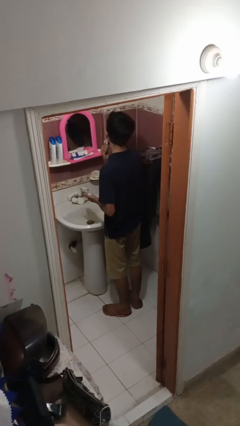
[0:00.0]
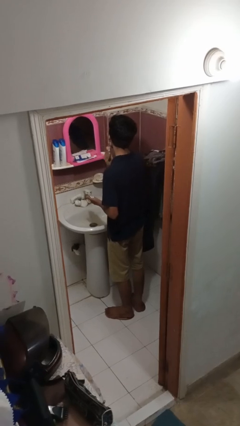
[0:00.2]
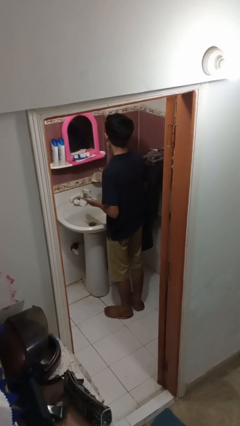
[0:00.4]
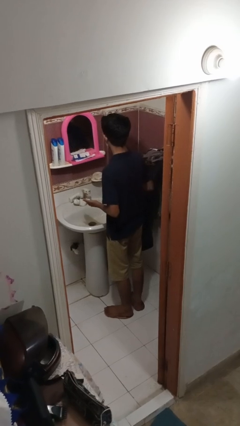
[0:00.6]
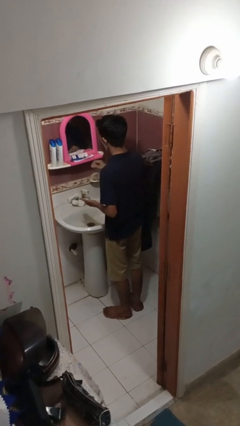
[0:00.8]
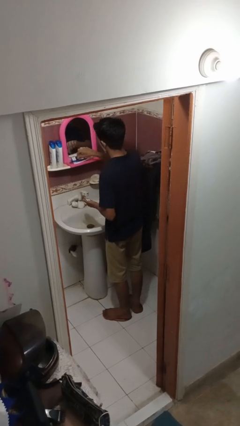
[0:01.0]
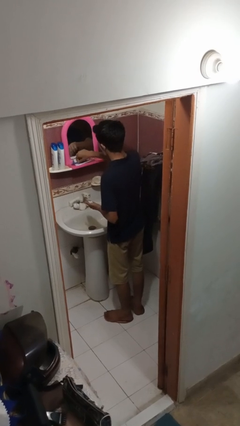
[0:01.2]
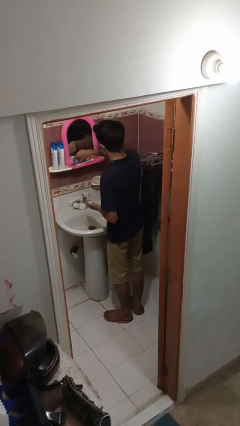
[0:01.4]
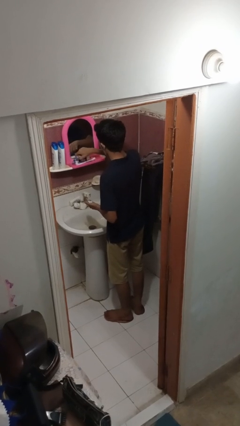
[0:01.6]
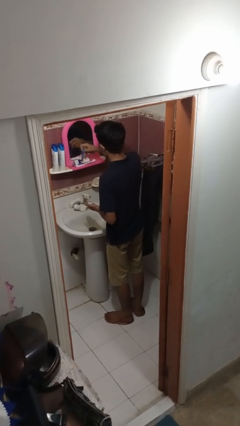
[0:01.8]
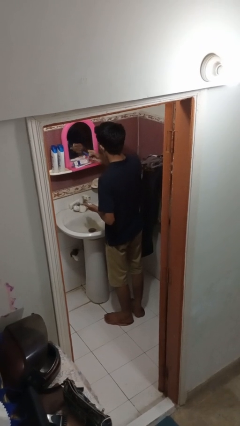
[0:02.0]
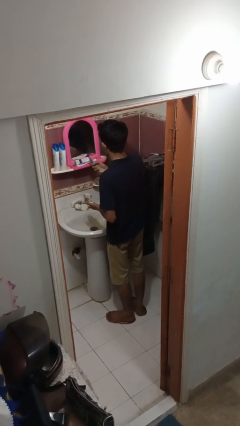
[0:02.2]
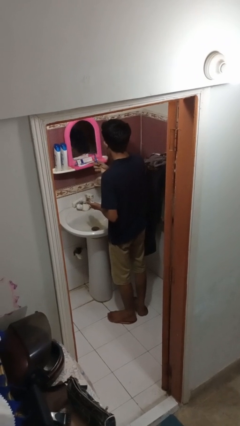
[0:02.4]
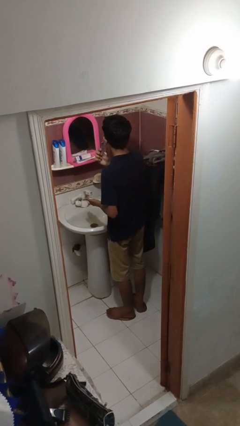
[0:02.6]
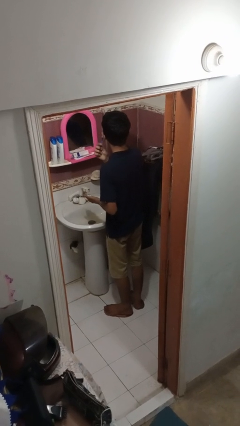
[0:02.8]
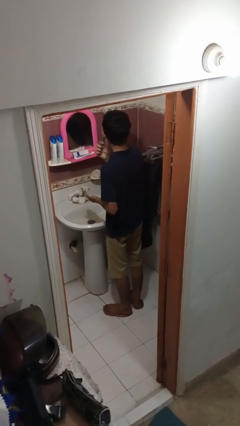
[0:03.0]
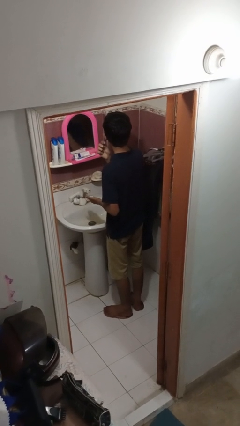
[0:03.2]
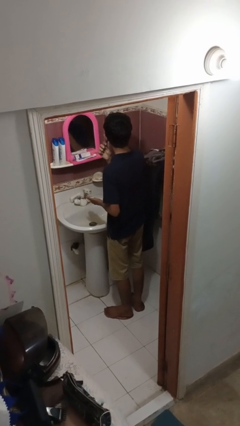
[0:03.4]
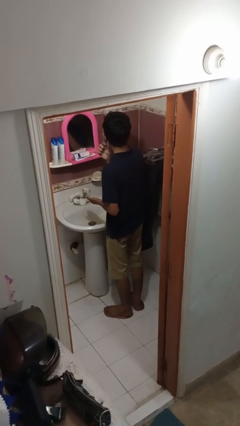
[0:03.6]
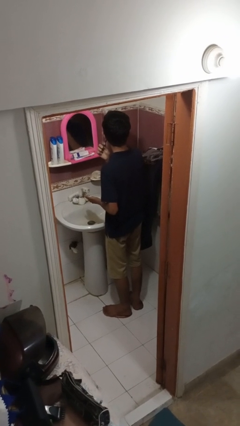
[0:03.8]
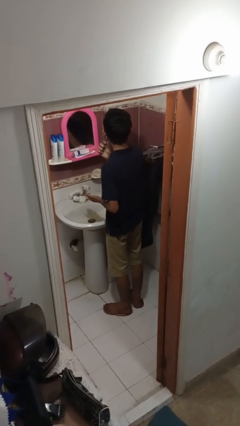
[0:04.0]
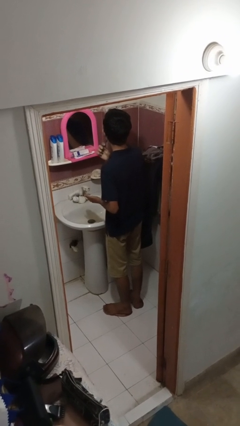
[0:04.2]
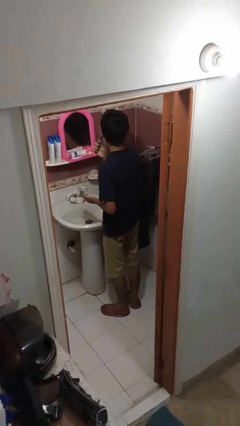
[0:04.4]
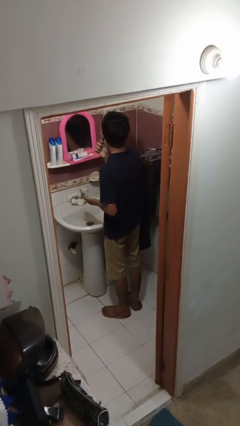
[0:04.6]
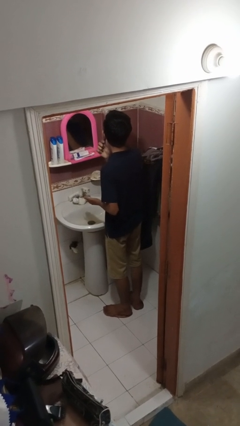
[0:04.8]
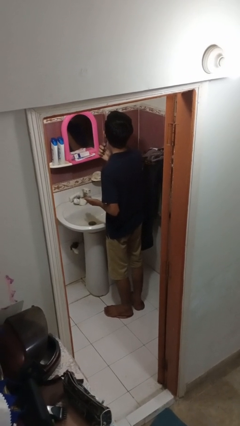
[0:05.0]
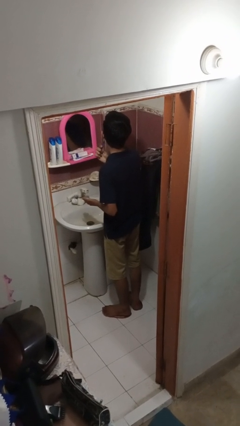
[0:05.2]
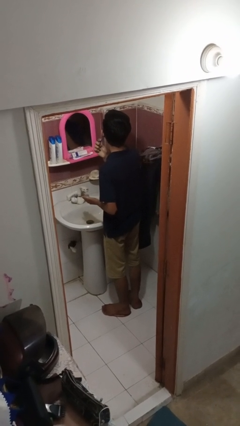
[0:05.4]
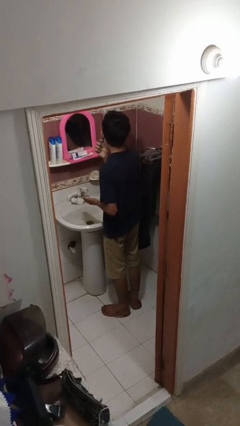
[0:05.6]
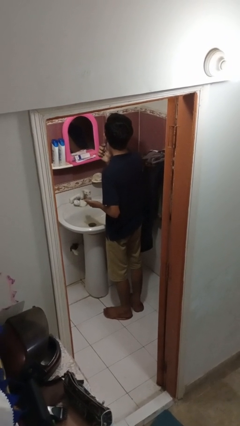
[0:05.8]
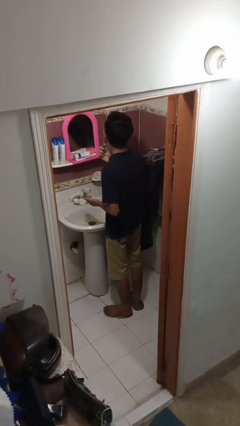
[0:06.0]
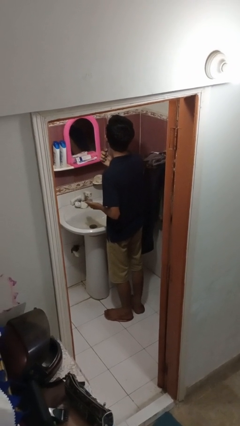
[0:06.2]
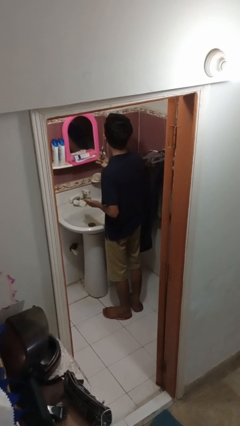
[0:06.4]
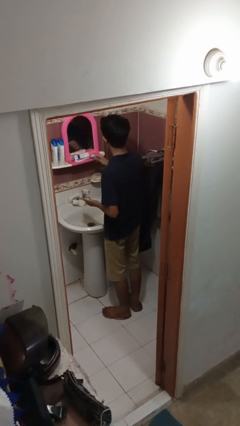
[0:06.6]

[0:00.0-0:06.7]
person shaves face

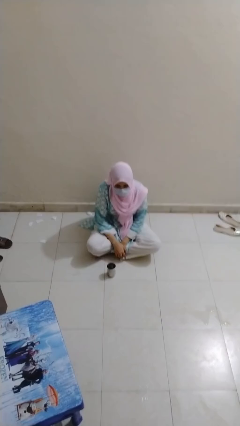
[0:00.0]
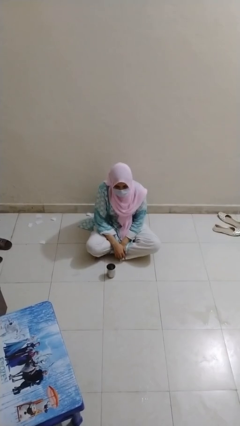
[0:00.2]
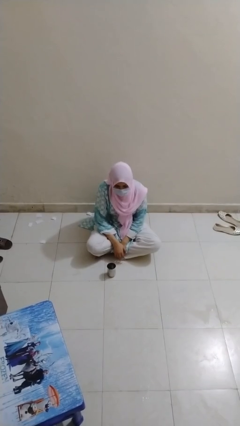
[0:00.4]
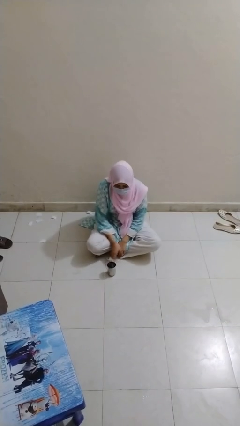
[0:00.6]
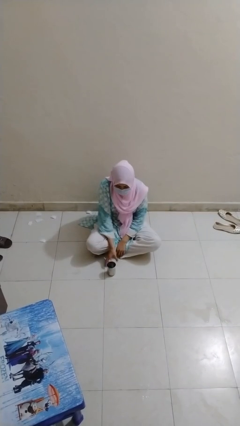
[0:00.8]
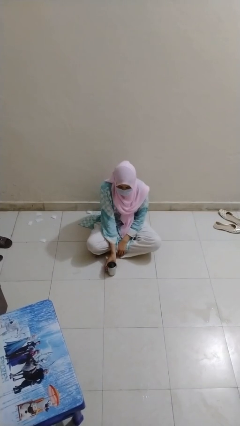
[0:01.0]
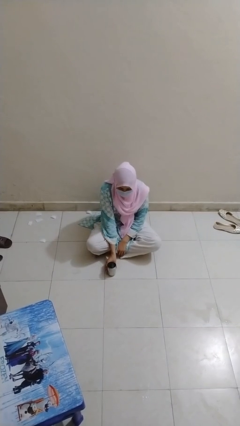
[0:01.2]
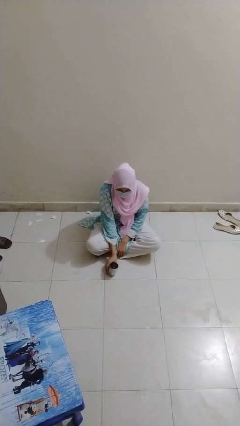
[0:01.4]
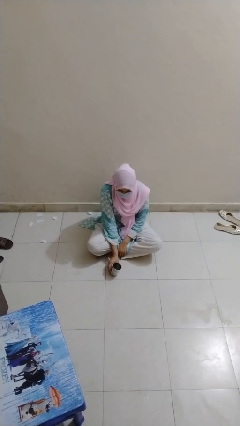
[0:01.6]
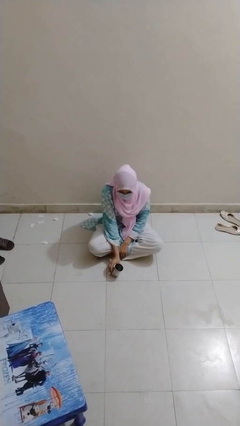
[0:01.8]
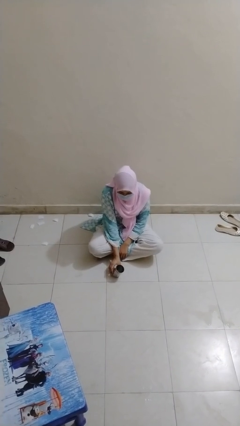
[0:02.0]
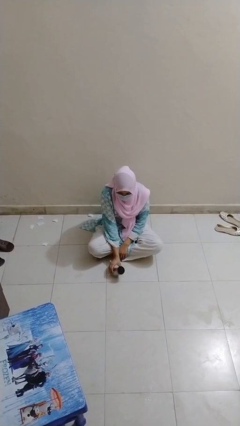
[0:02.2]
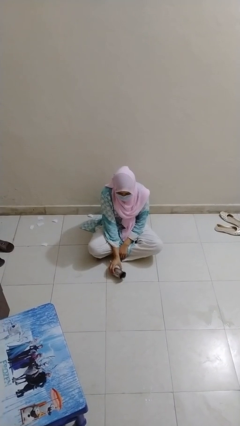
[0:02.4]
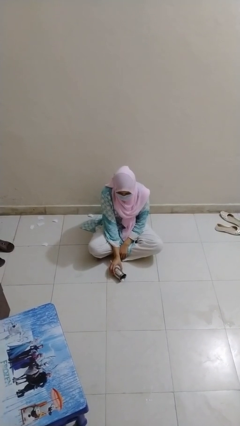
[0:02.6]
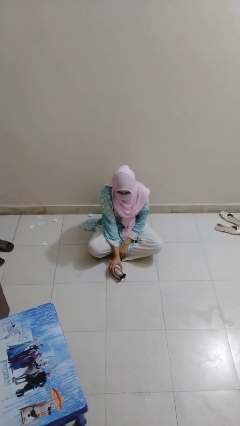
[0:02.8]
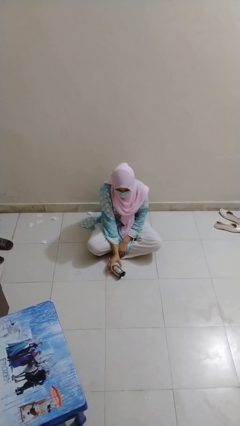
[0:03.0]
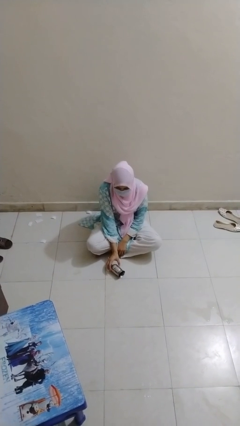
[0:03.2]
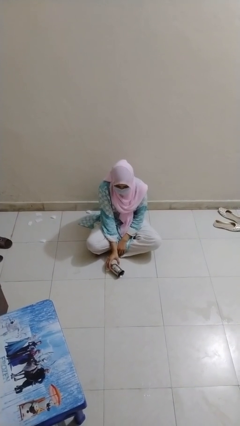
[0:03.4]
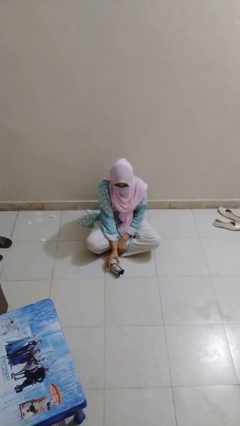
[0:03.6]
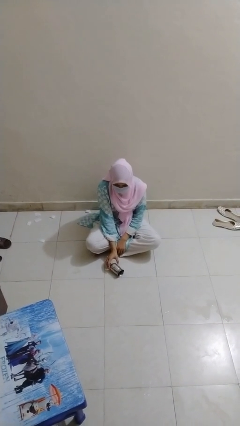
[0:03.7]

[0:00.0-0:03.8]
person spills on floor

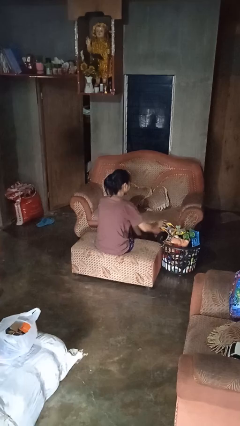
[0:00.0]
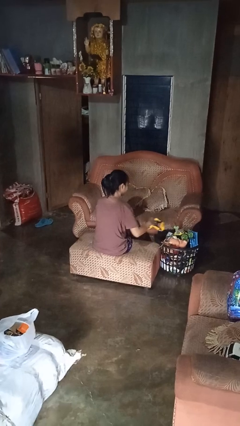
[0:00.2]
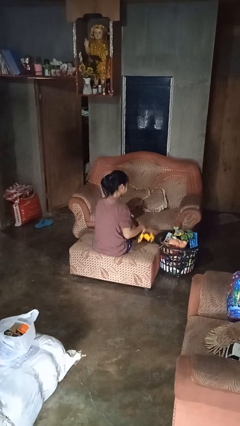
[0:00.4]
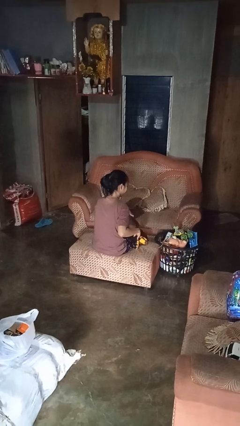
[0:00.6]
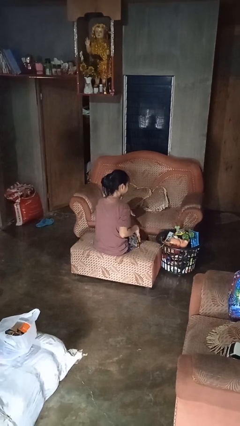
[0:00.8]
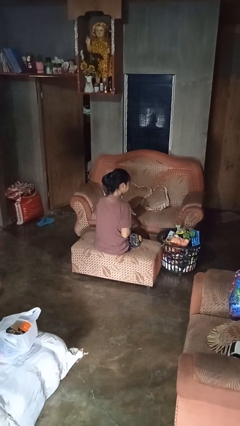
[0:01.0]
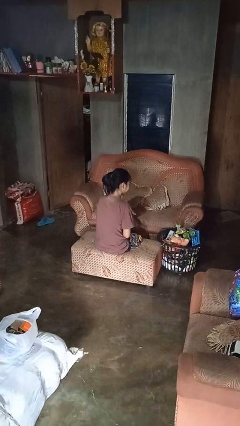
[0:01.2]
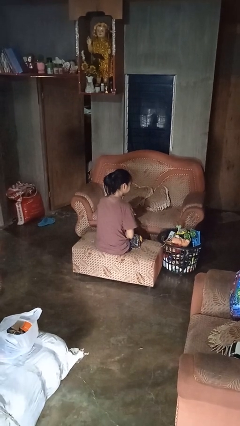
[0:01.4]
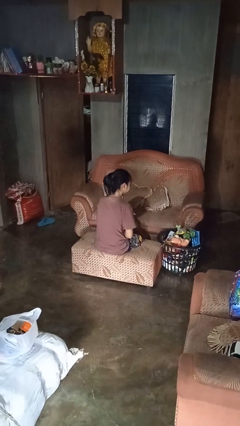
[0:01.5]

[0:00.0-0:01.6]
person takes object from basket

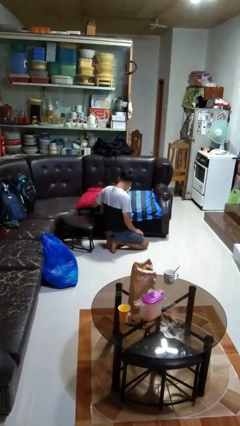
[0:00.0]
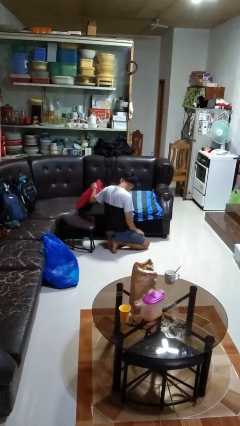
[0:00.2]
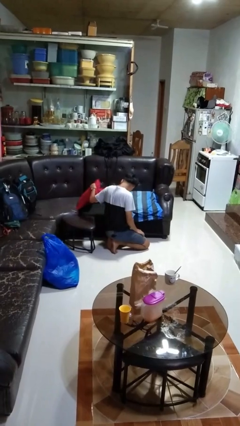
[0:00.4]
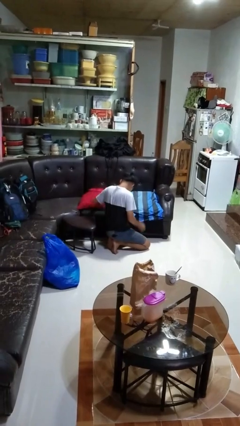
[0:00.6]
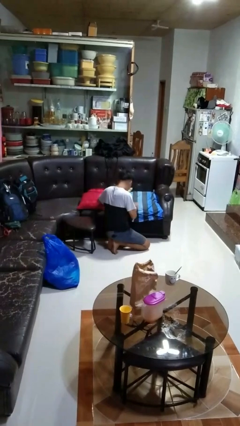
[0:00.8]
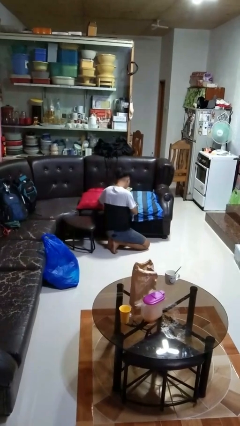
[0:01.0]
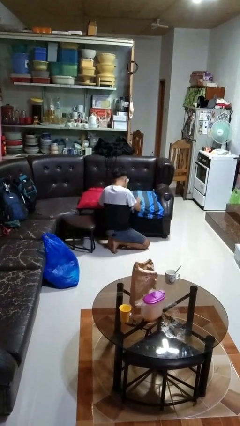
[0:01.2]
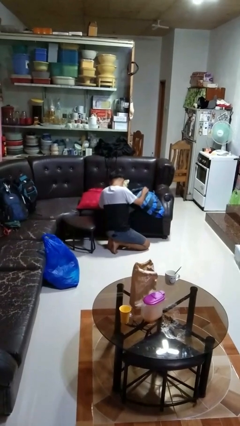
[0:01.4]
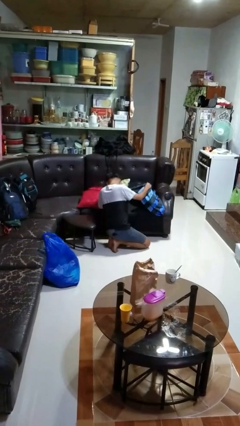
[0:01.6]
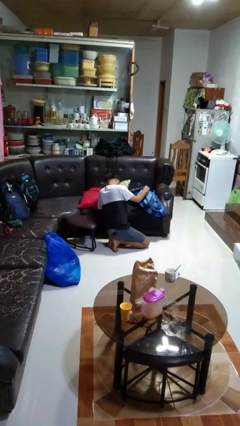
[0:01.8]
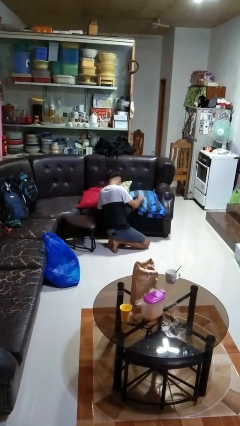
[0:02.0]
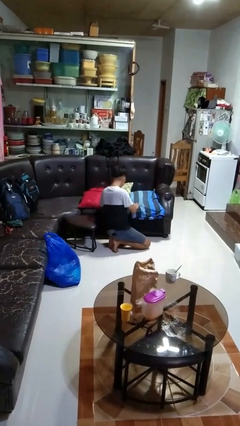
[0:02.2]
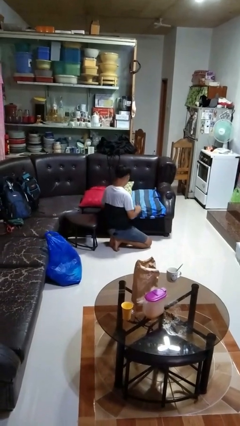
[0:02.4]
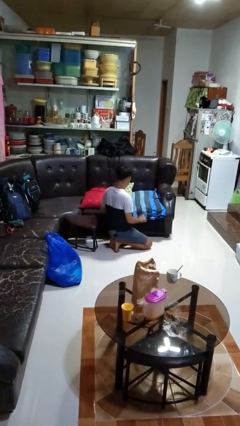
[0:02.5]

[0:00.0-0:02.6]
person searches in couch

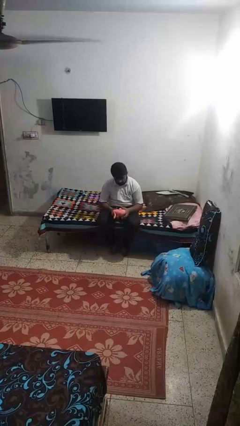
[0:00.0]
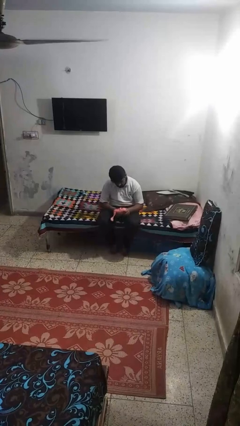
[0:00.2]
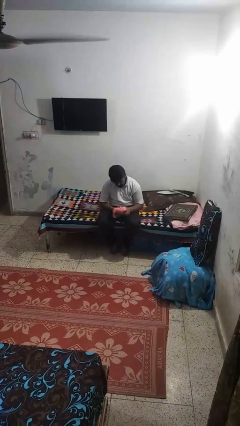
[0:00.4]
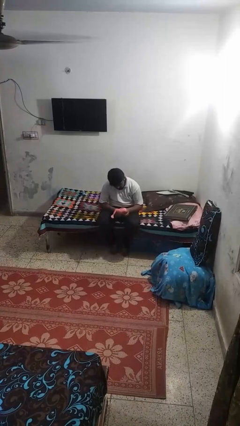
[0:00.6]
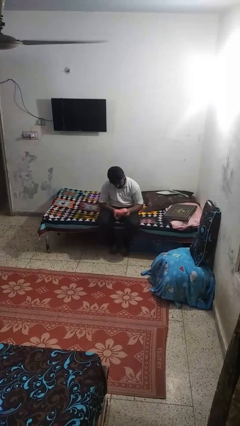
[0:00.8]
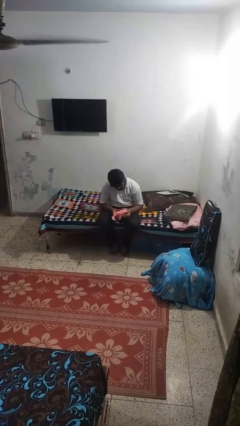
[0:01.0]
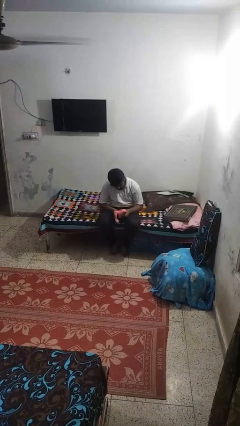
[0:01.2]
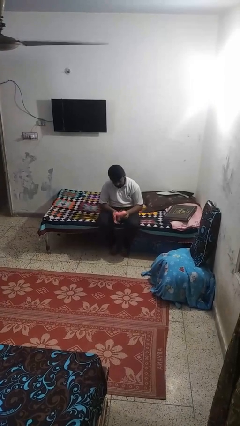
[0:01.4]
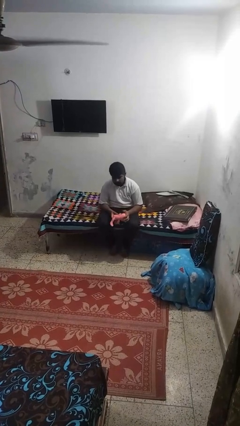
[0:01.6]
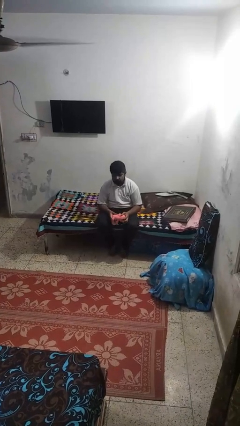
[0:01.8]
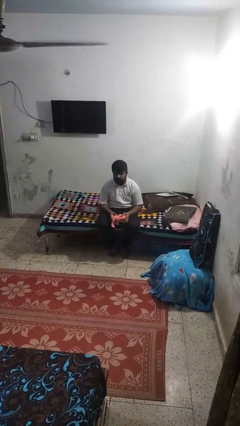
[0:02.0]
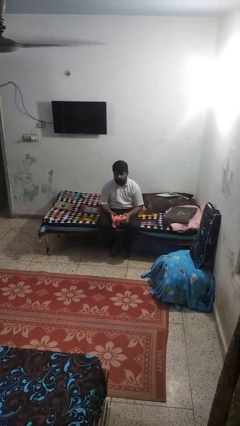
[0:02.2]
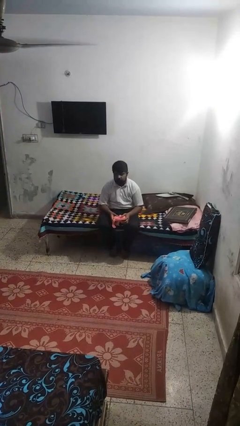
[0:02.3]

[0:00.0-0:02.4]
person squeezes object

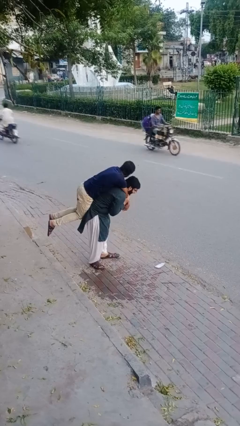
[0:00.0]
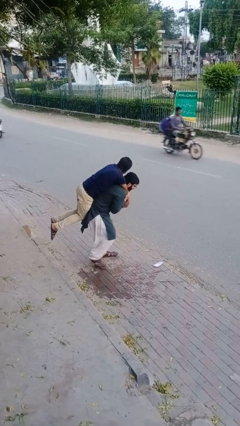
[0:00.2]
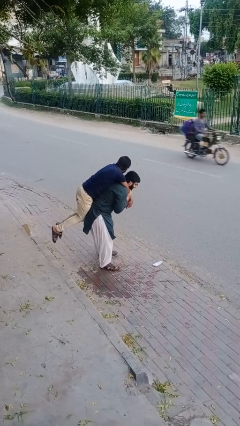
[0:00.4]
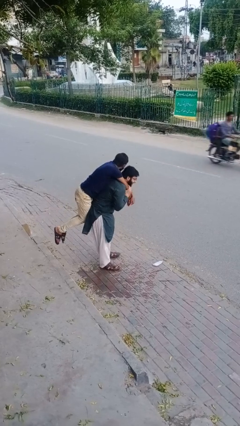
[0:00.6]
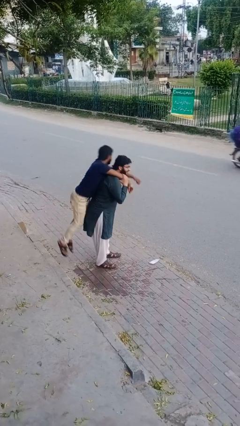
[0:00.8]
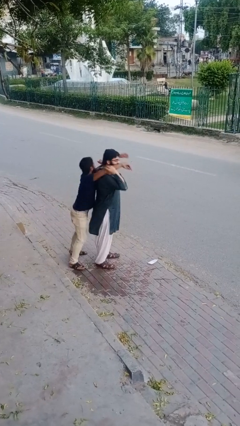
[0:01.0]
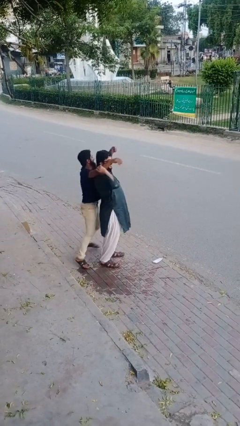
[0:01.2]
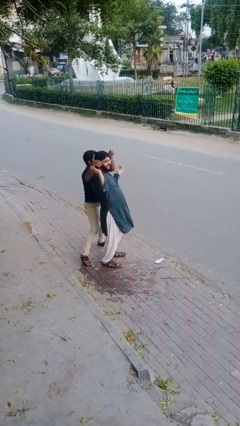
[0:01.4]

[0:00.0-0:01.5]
person puts down person
